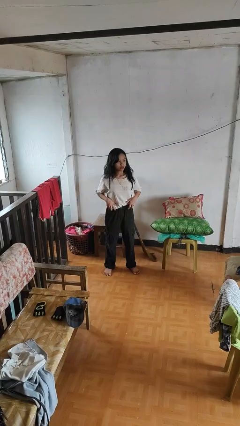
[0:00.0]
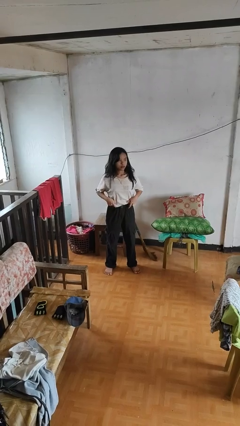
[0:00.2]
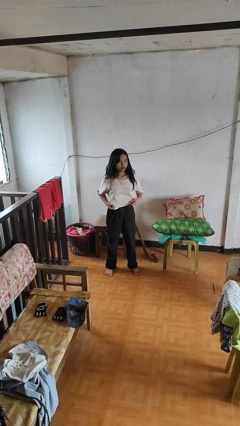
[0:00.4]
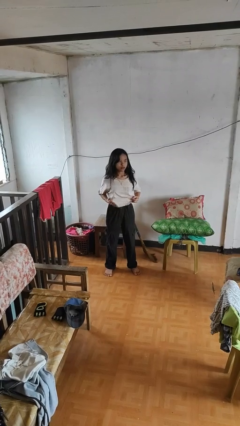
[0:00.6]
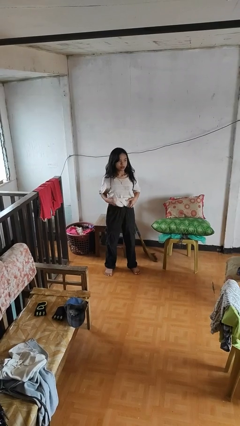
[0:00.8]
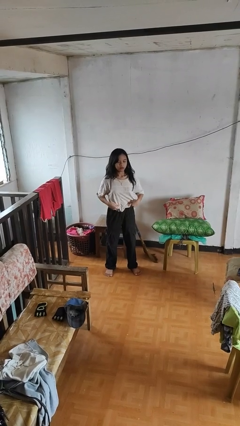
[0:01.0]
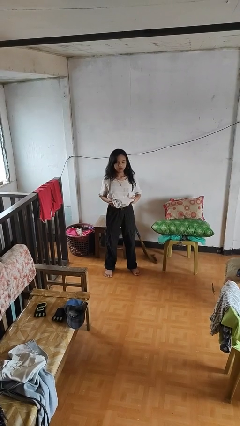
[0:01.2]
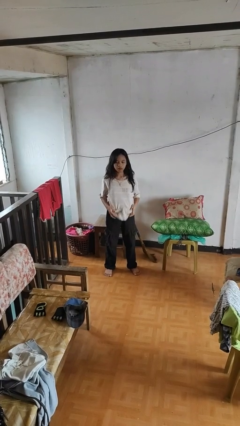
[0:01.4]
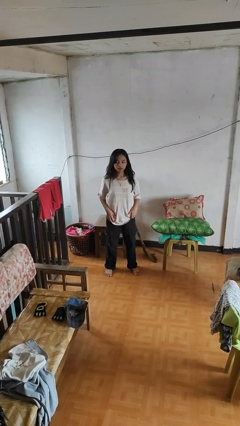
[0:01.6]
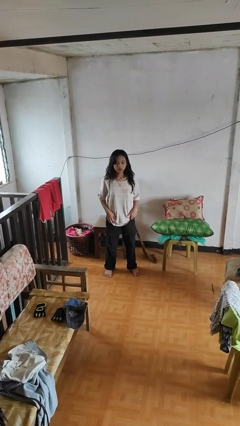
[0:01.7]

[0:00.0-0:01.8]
person untucks shirt

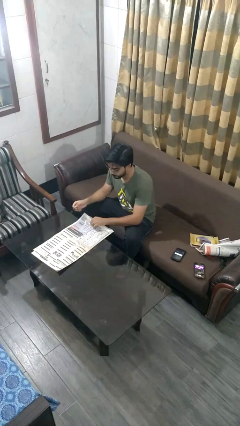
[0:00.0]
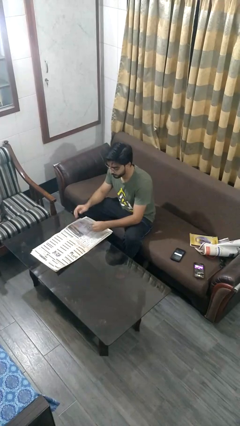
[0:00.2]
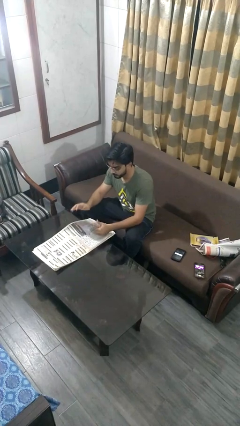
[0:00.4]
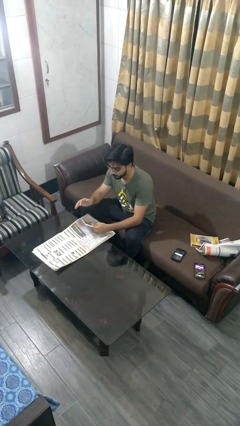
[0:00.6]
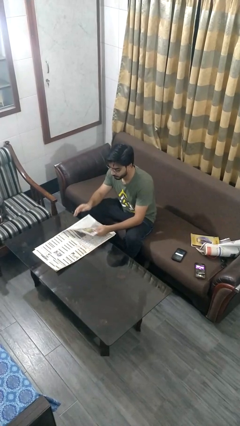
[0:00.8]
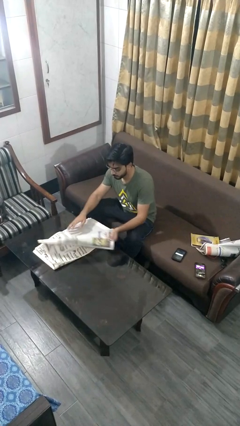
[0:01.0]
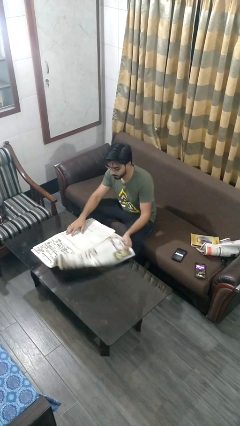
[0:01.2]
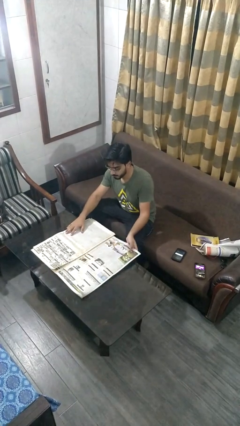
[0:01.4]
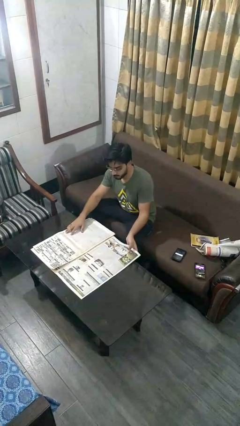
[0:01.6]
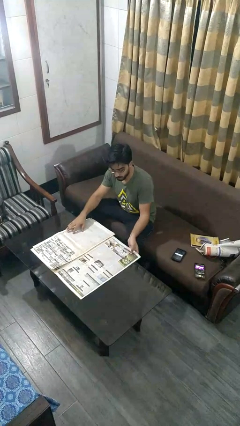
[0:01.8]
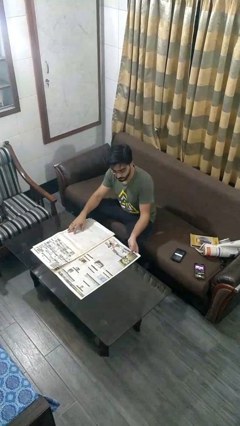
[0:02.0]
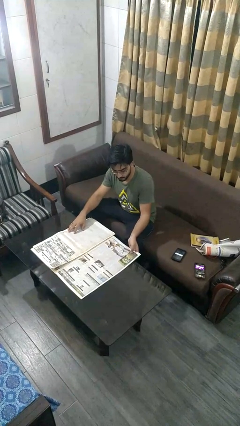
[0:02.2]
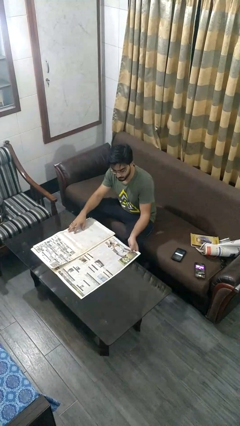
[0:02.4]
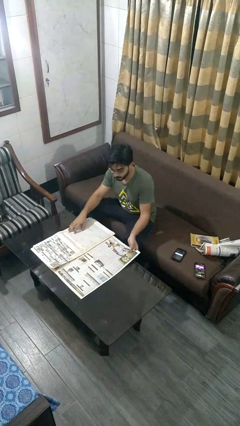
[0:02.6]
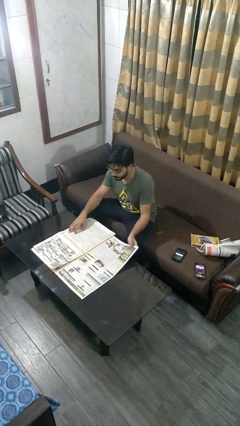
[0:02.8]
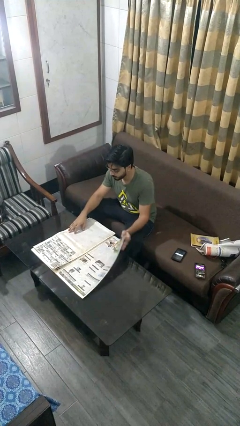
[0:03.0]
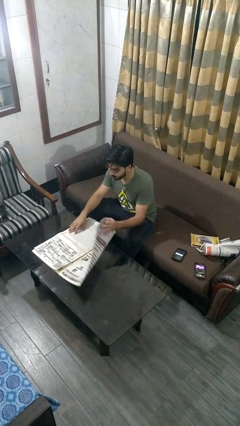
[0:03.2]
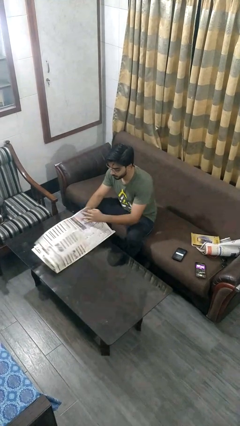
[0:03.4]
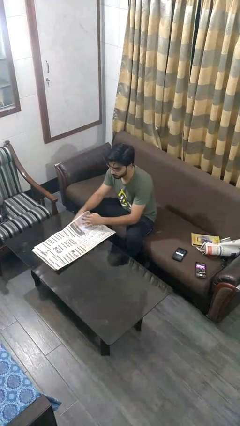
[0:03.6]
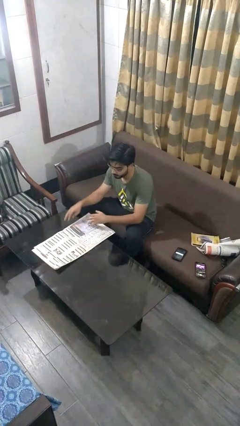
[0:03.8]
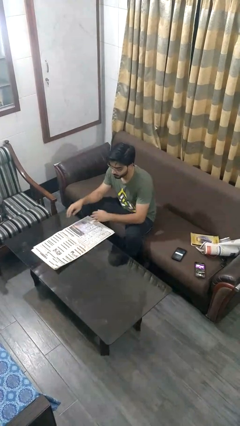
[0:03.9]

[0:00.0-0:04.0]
person reads newspaper

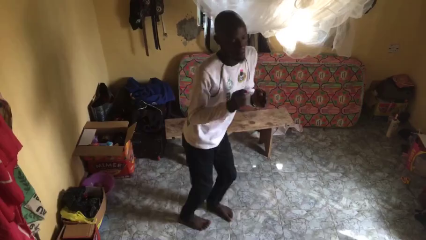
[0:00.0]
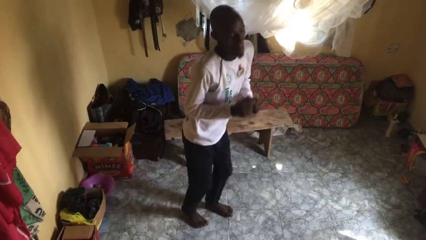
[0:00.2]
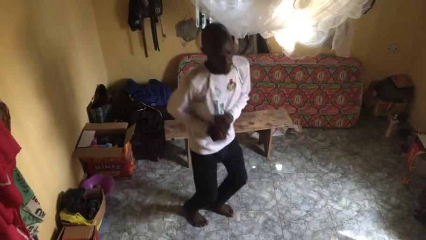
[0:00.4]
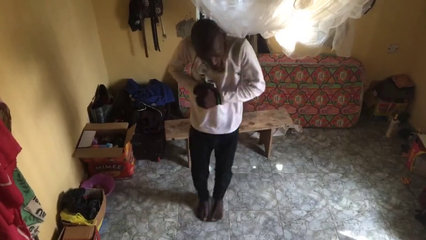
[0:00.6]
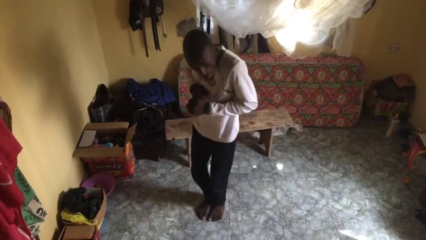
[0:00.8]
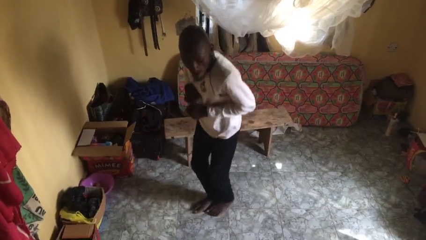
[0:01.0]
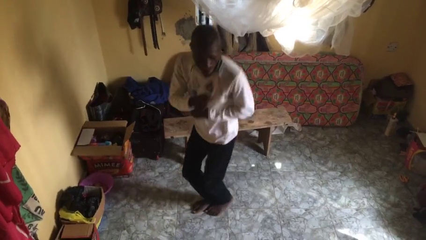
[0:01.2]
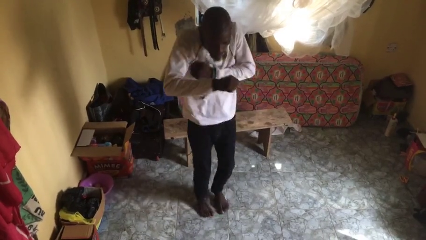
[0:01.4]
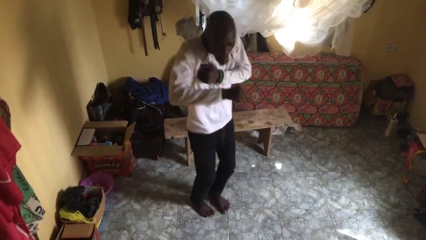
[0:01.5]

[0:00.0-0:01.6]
person dances in place

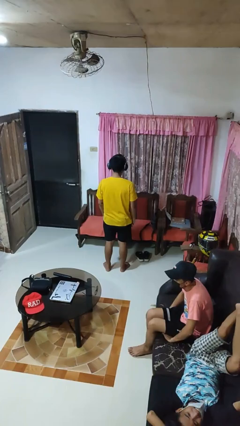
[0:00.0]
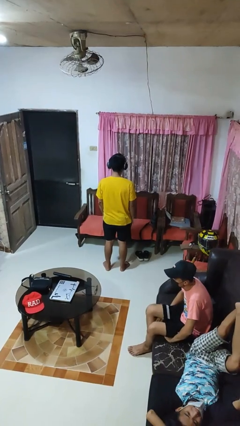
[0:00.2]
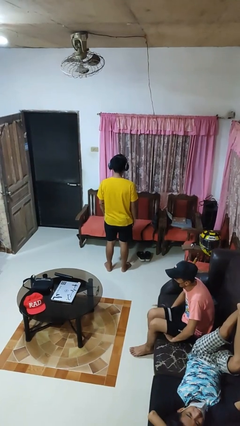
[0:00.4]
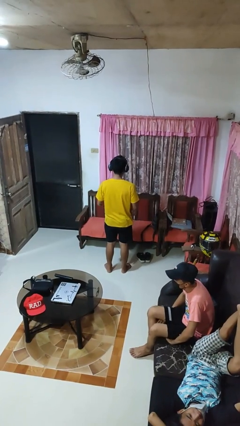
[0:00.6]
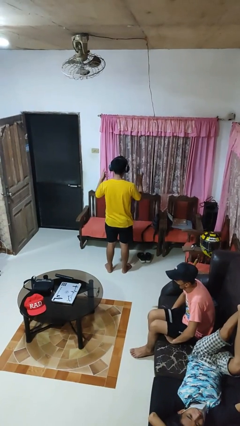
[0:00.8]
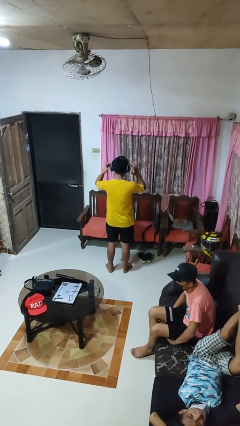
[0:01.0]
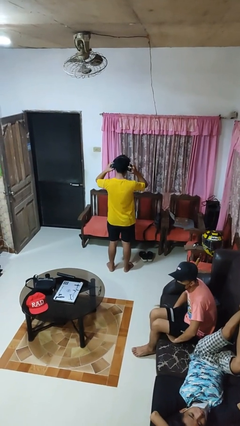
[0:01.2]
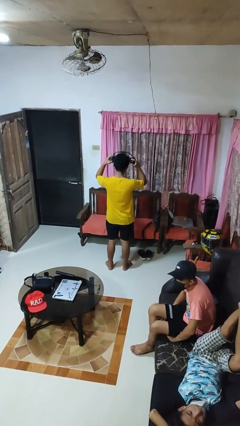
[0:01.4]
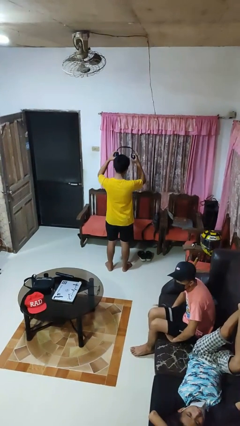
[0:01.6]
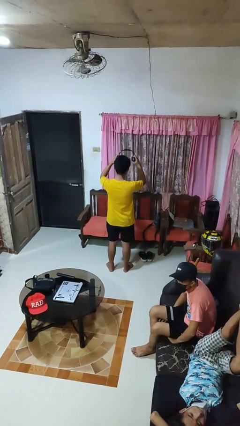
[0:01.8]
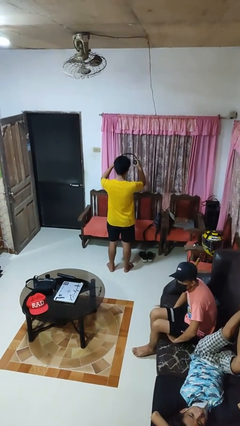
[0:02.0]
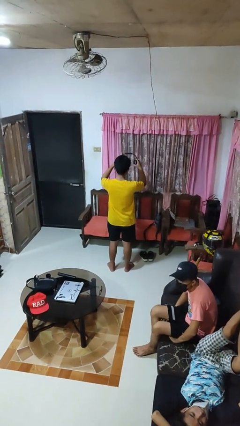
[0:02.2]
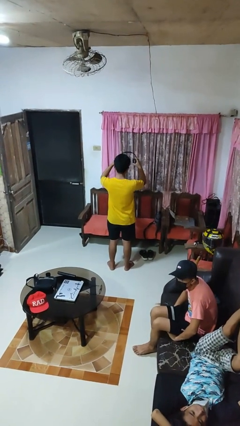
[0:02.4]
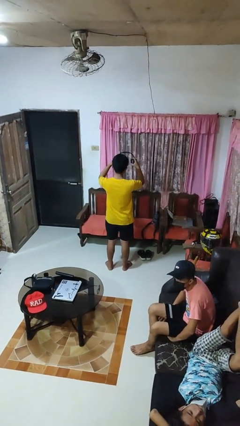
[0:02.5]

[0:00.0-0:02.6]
person takes off headphones

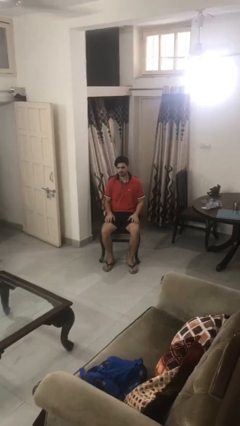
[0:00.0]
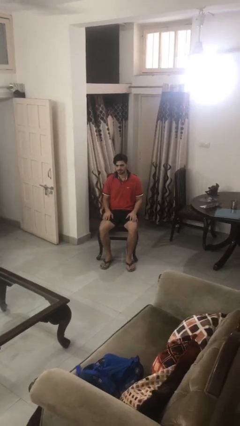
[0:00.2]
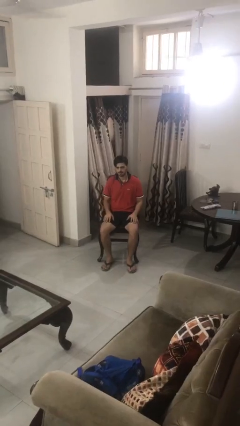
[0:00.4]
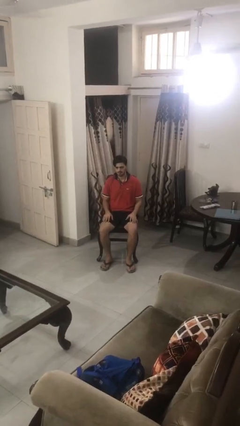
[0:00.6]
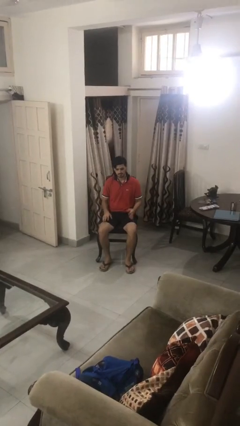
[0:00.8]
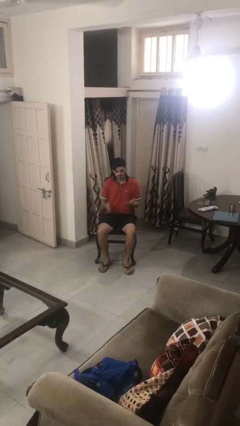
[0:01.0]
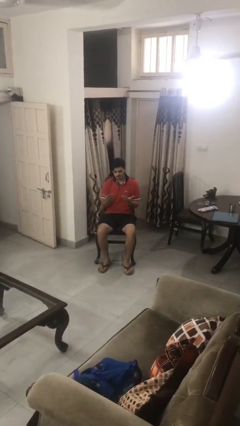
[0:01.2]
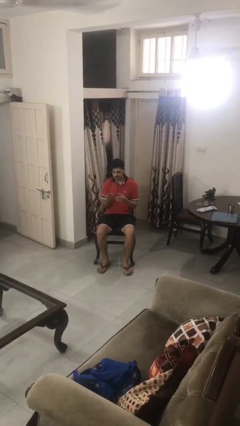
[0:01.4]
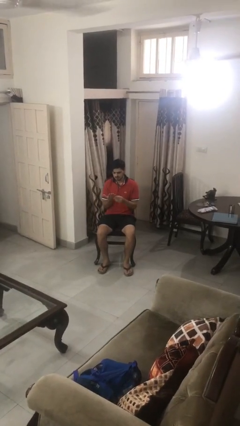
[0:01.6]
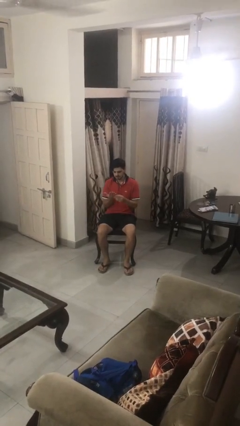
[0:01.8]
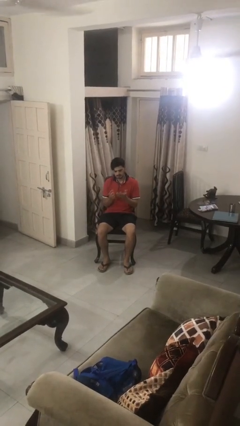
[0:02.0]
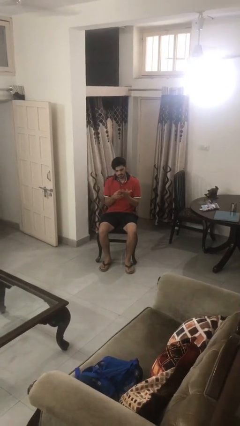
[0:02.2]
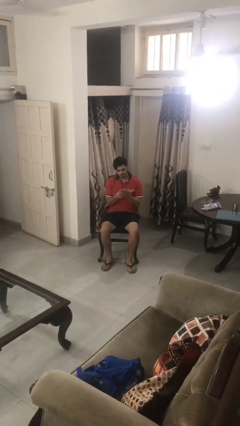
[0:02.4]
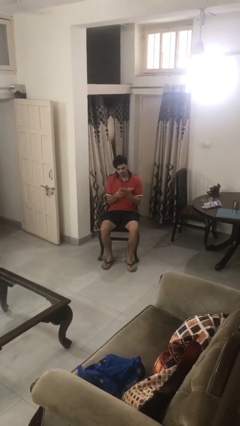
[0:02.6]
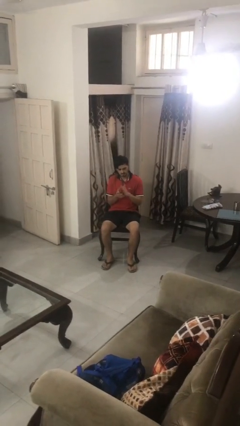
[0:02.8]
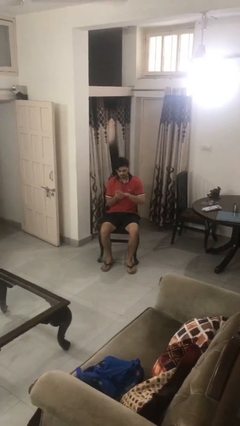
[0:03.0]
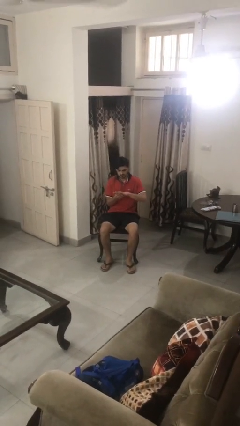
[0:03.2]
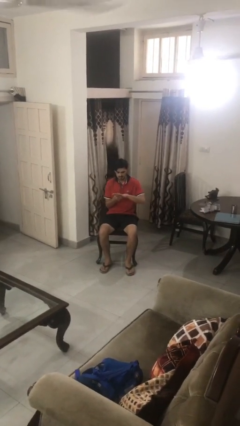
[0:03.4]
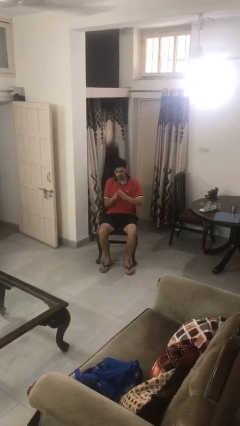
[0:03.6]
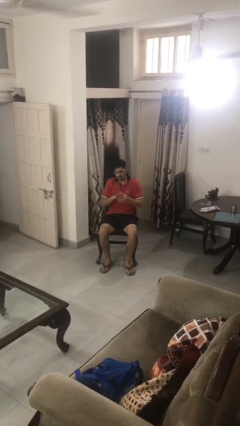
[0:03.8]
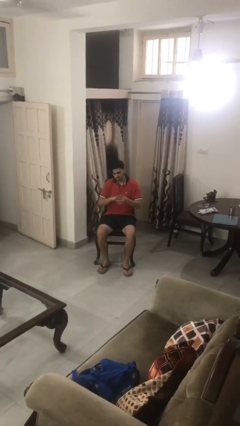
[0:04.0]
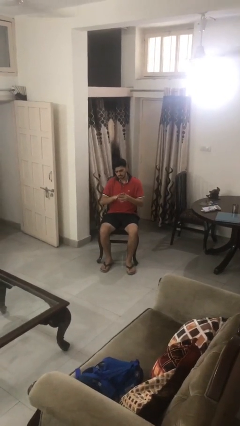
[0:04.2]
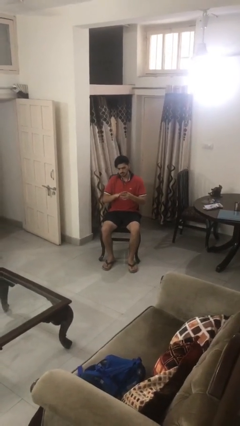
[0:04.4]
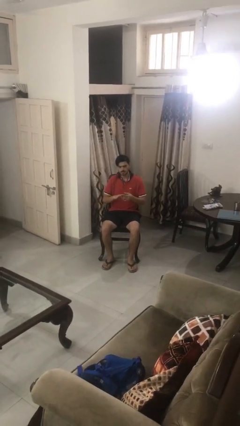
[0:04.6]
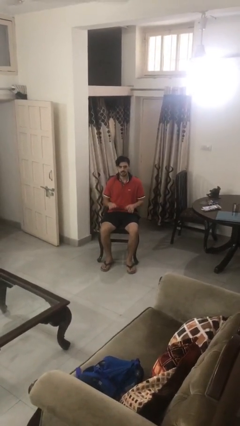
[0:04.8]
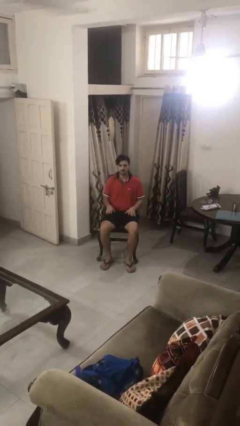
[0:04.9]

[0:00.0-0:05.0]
person looks at hands in lap

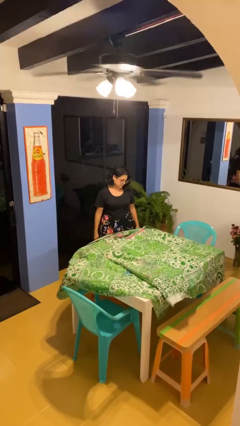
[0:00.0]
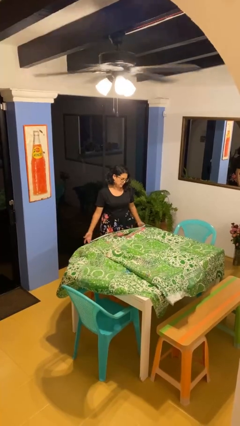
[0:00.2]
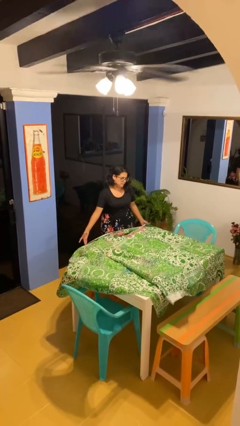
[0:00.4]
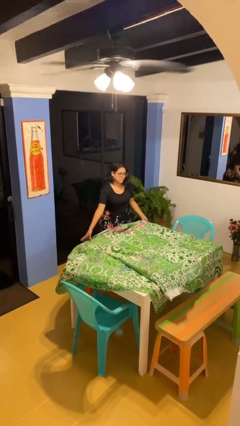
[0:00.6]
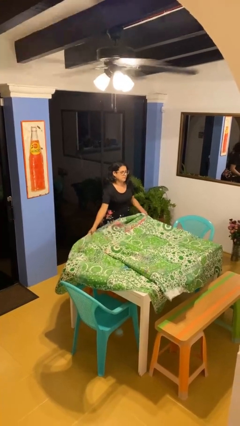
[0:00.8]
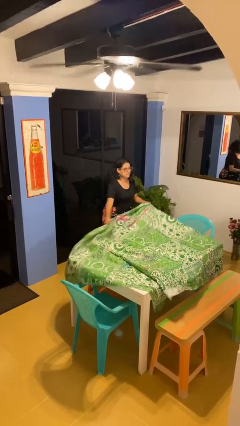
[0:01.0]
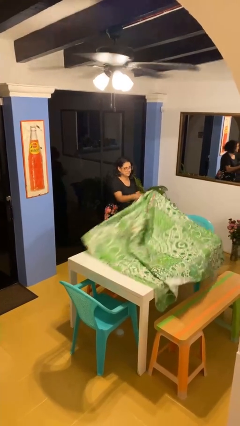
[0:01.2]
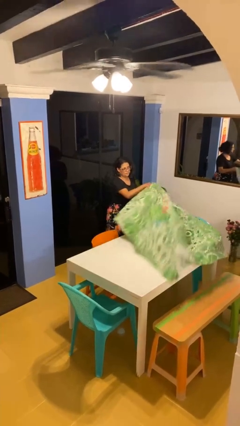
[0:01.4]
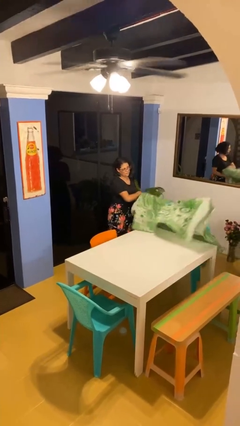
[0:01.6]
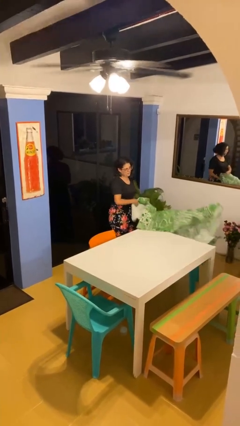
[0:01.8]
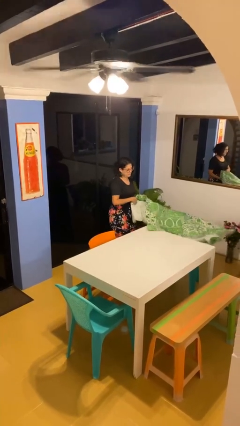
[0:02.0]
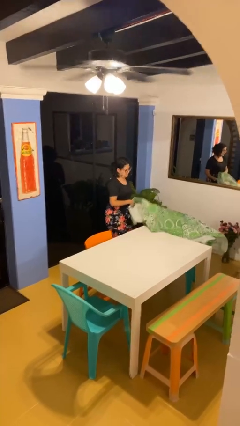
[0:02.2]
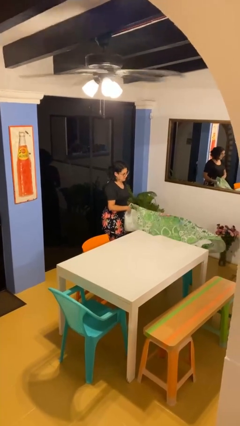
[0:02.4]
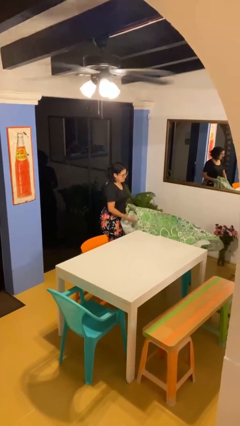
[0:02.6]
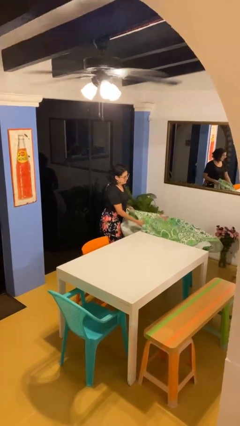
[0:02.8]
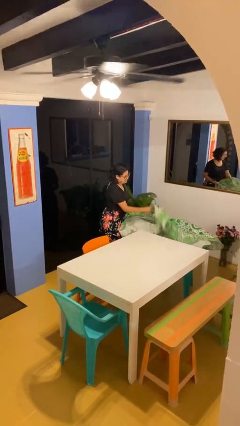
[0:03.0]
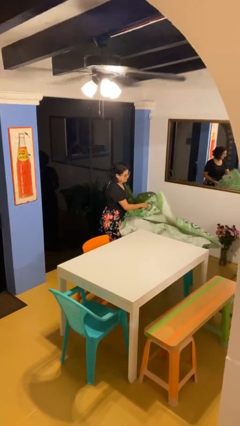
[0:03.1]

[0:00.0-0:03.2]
person folds tablecloth
